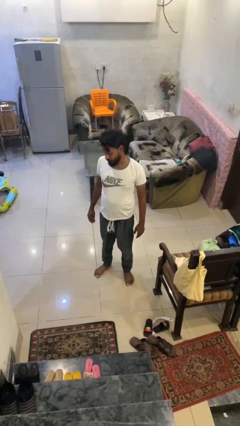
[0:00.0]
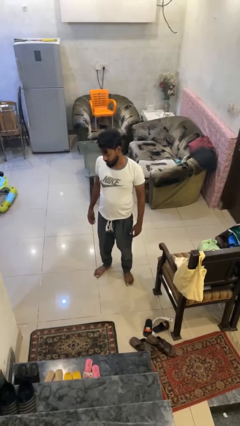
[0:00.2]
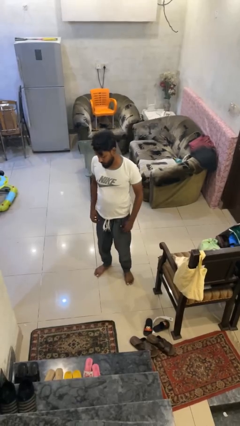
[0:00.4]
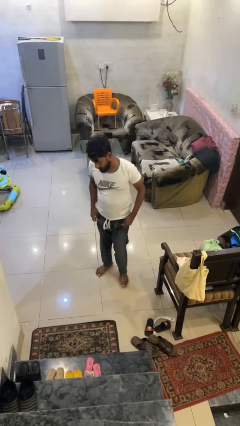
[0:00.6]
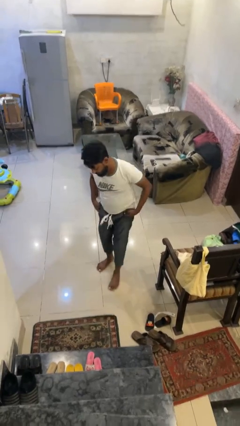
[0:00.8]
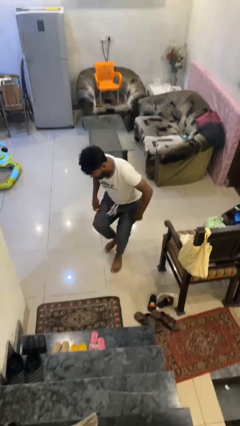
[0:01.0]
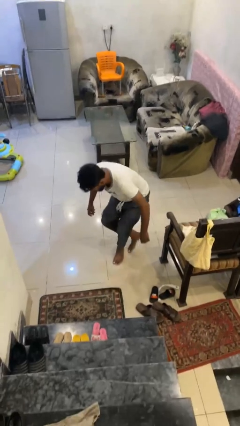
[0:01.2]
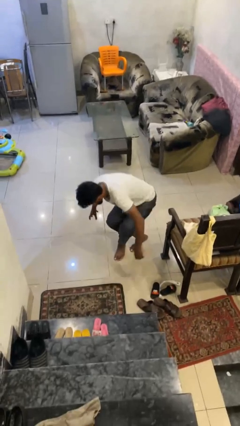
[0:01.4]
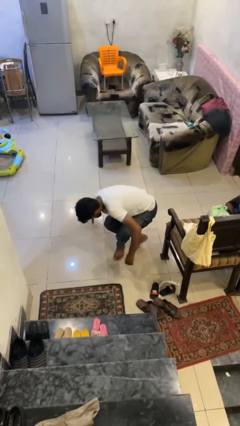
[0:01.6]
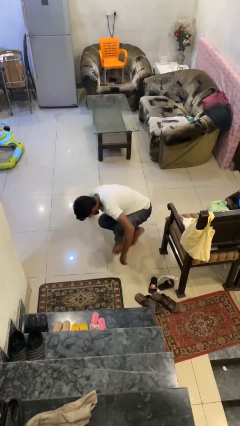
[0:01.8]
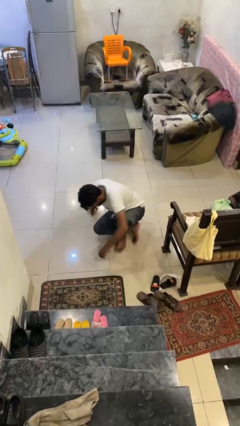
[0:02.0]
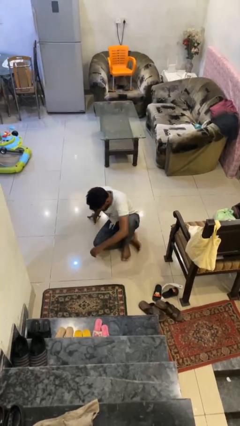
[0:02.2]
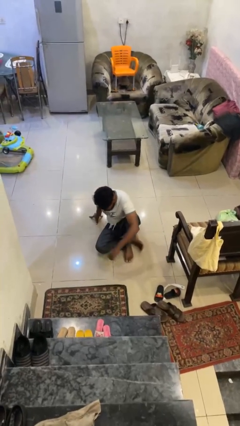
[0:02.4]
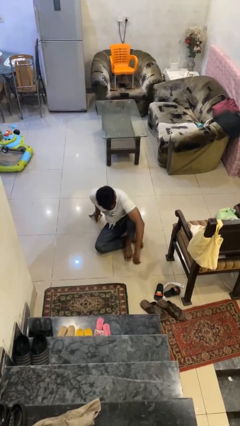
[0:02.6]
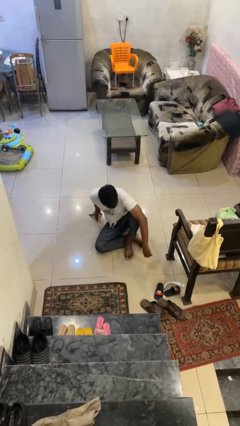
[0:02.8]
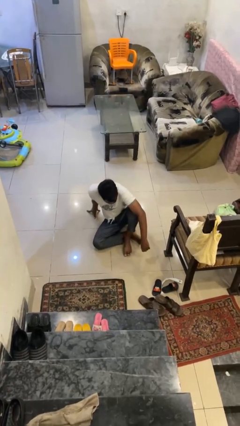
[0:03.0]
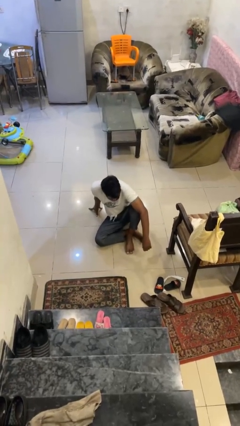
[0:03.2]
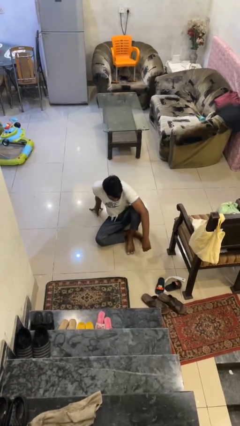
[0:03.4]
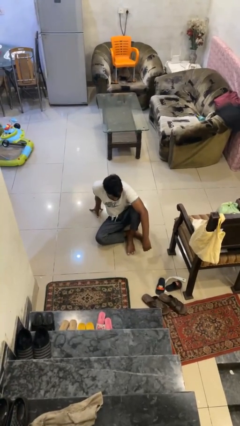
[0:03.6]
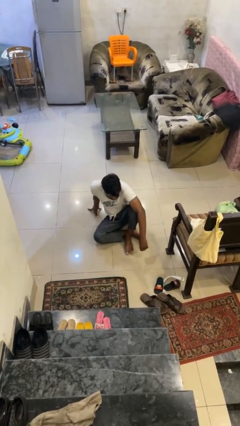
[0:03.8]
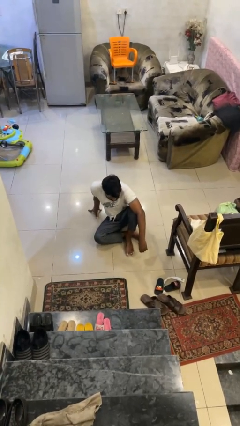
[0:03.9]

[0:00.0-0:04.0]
person sits crisscross

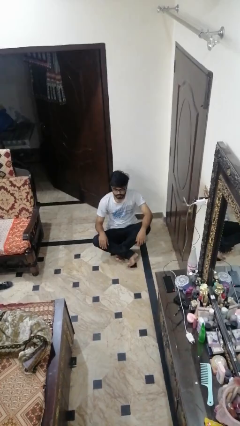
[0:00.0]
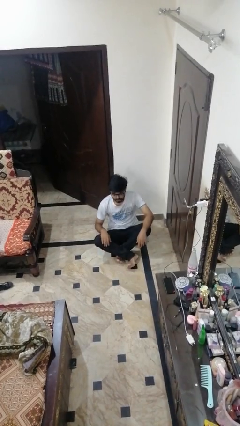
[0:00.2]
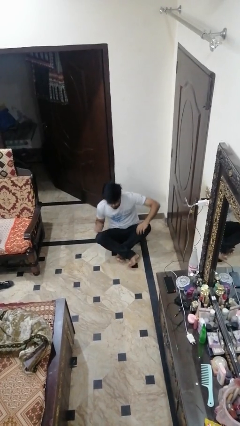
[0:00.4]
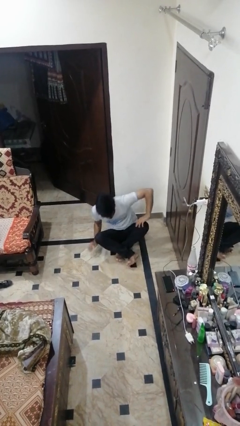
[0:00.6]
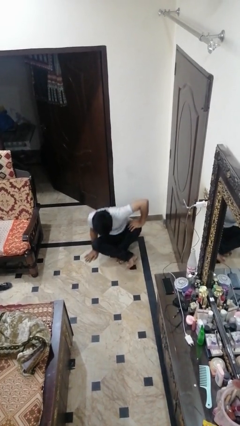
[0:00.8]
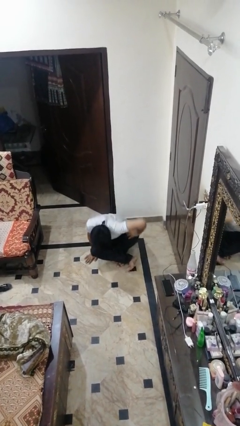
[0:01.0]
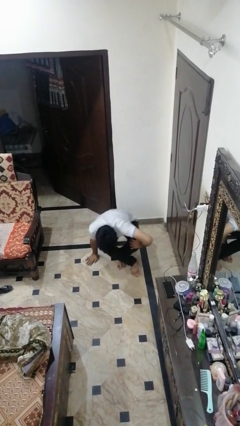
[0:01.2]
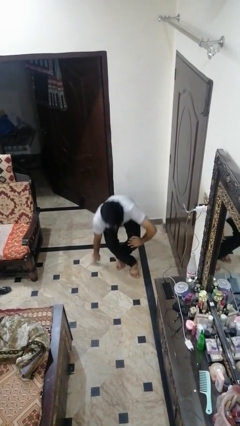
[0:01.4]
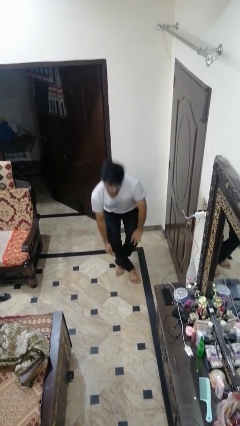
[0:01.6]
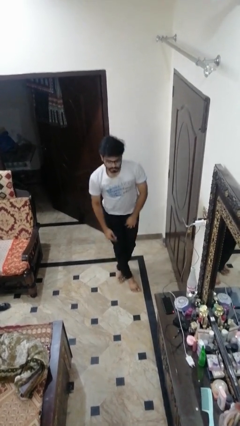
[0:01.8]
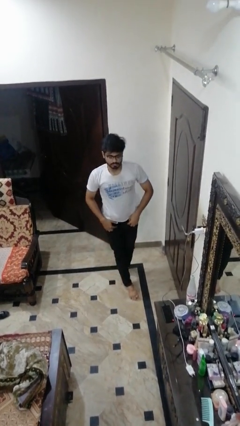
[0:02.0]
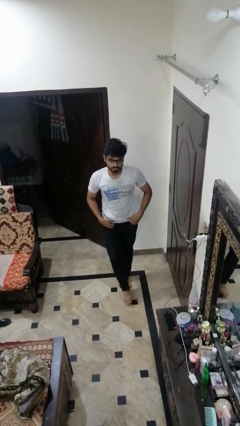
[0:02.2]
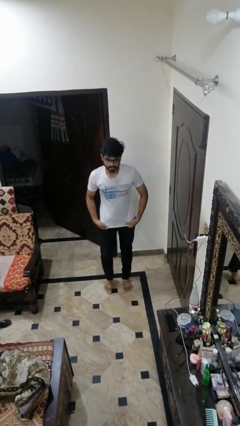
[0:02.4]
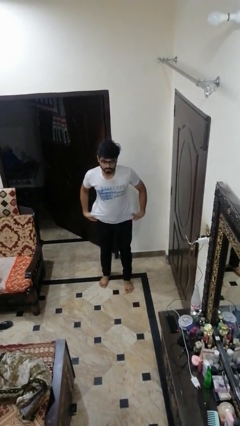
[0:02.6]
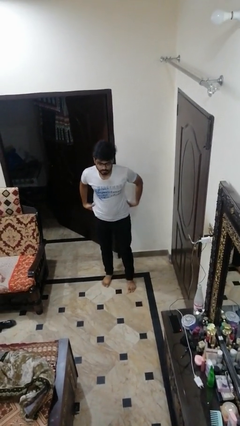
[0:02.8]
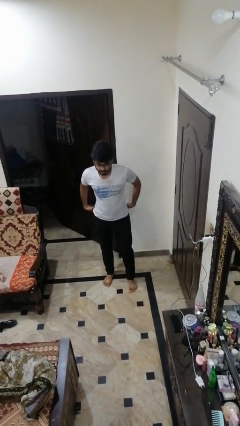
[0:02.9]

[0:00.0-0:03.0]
person stands up from floor

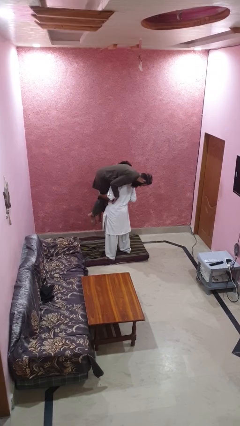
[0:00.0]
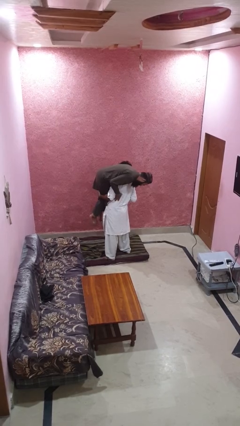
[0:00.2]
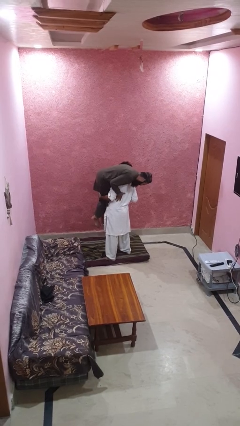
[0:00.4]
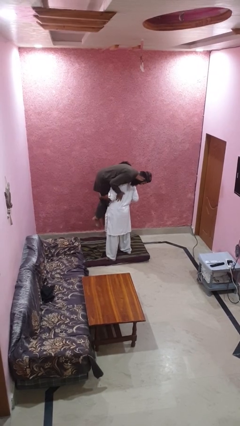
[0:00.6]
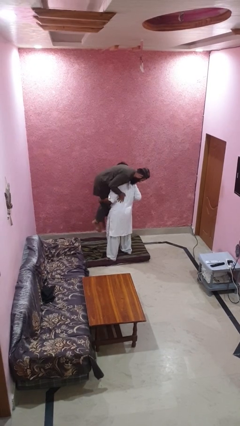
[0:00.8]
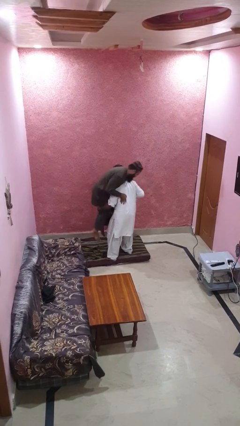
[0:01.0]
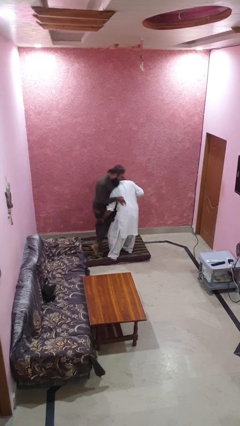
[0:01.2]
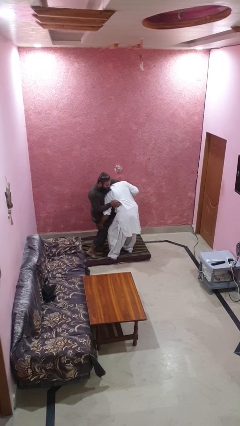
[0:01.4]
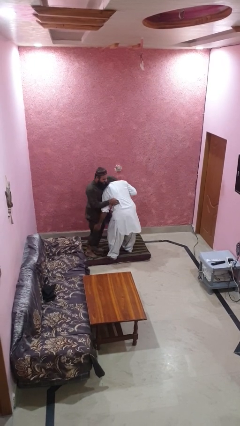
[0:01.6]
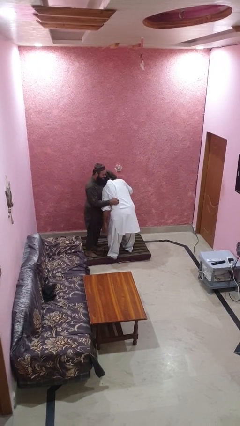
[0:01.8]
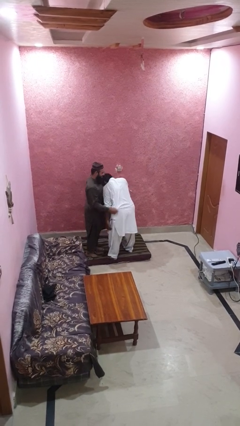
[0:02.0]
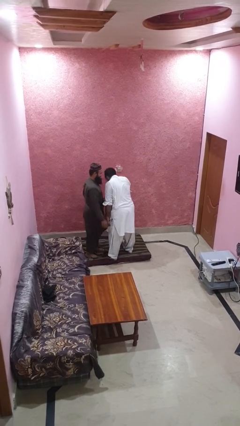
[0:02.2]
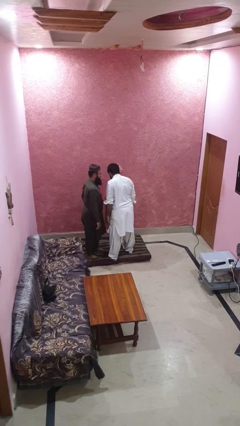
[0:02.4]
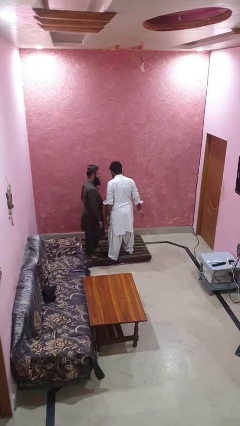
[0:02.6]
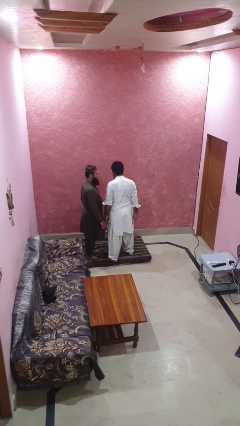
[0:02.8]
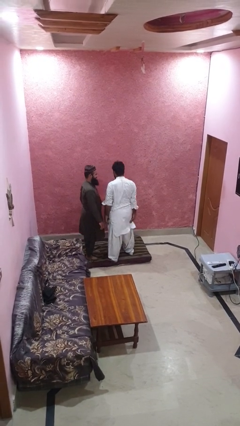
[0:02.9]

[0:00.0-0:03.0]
person puts down person

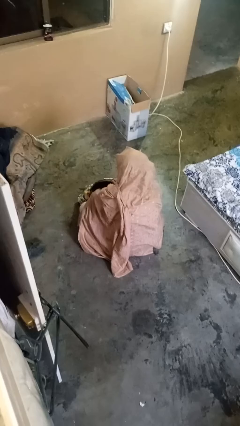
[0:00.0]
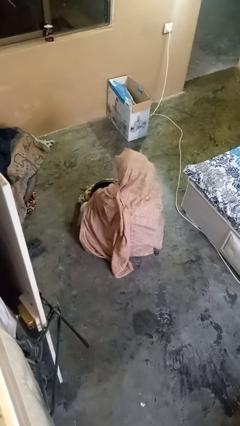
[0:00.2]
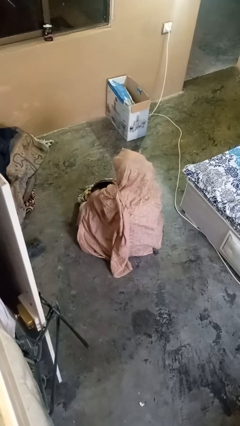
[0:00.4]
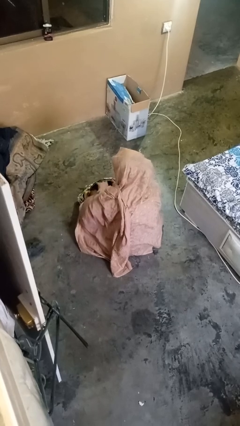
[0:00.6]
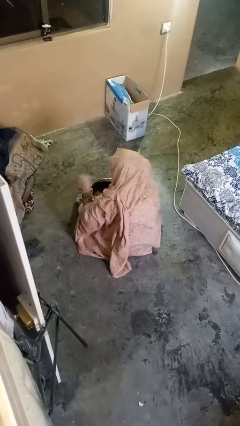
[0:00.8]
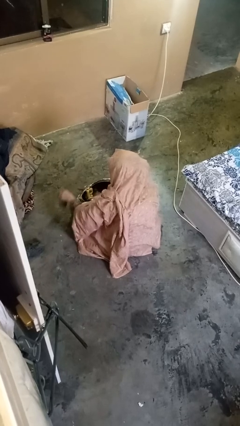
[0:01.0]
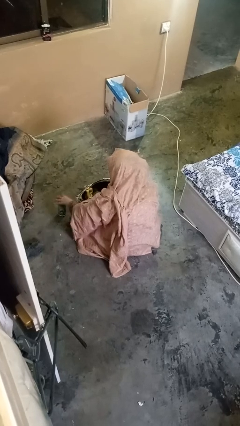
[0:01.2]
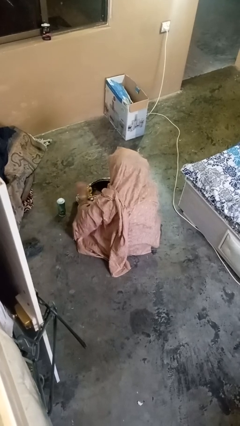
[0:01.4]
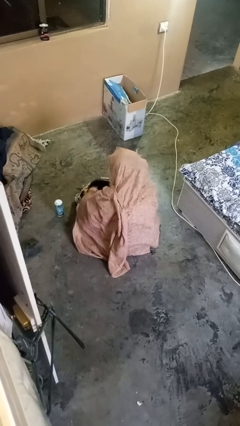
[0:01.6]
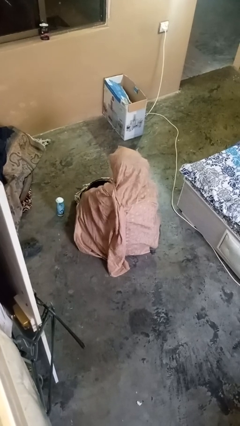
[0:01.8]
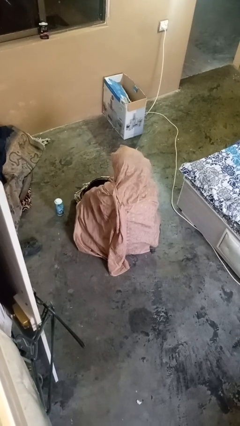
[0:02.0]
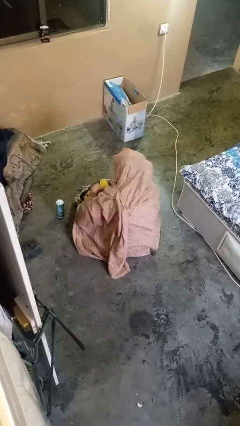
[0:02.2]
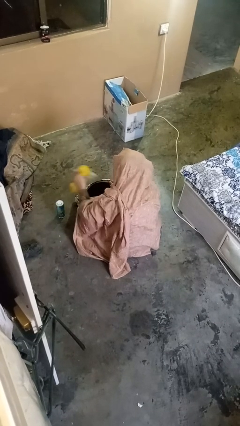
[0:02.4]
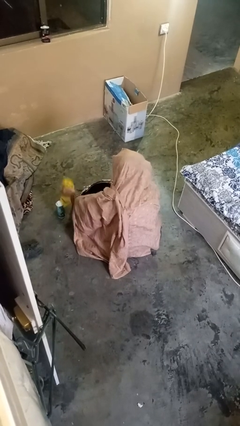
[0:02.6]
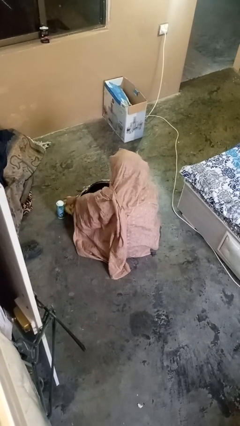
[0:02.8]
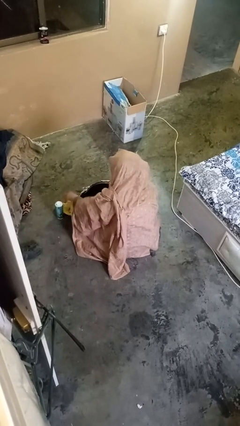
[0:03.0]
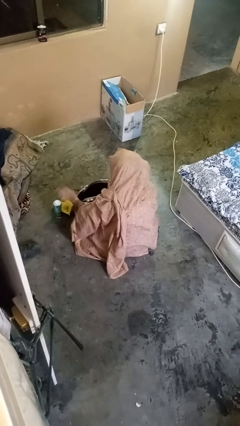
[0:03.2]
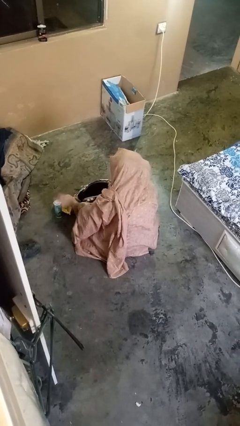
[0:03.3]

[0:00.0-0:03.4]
person takes object from purse

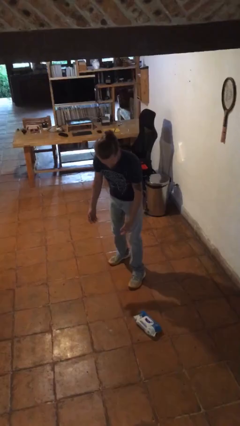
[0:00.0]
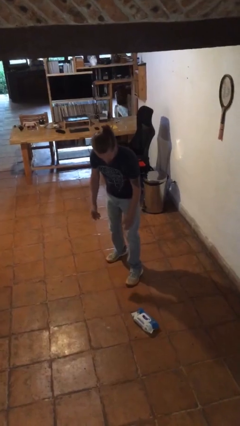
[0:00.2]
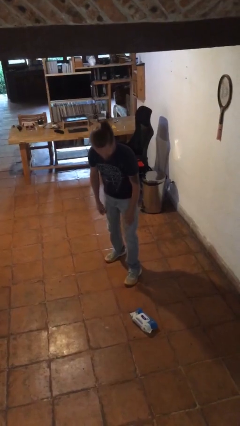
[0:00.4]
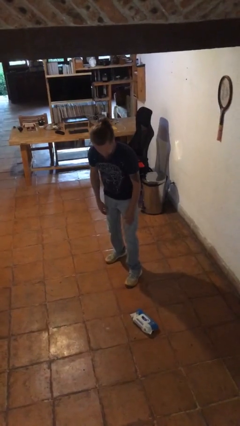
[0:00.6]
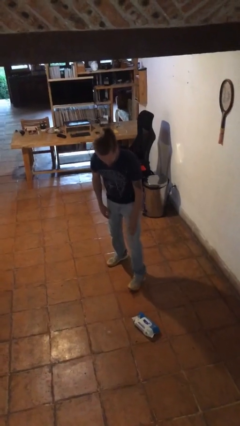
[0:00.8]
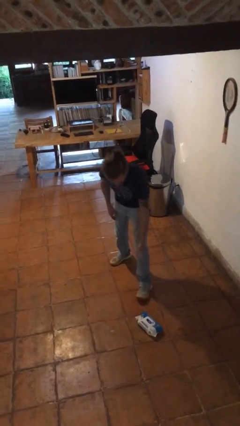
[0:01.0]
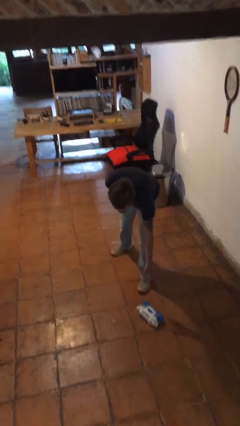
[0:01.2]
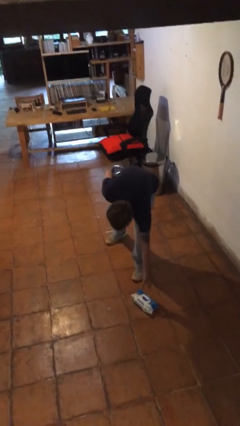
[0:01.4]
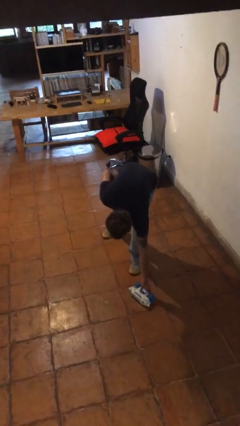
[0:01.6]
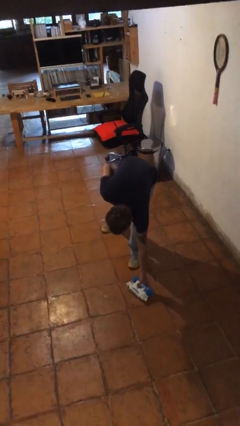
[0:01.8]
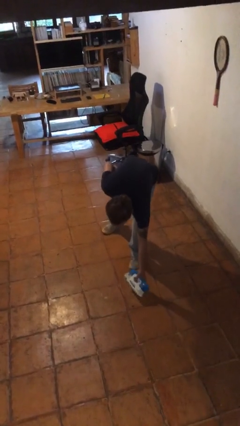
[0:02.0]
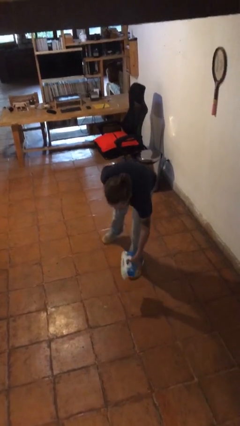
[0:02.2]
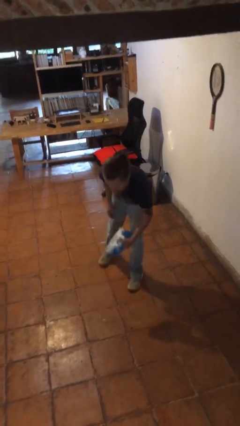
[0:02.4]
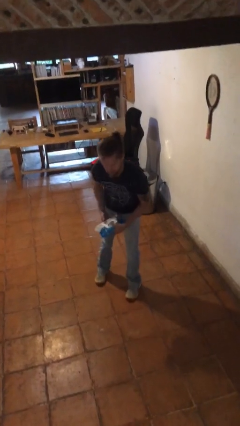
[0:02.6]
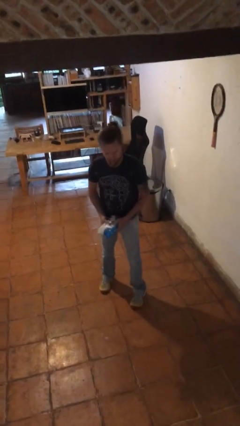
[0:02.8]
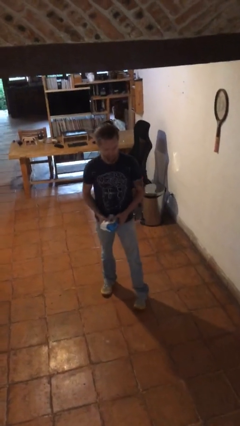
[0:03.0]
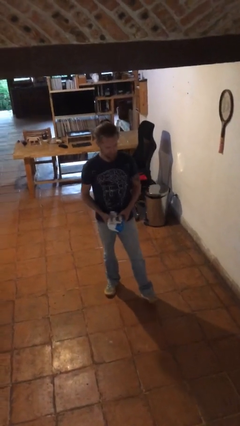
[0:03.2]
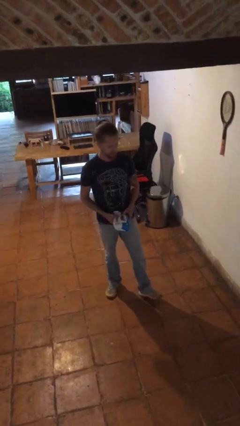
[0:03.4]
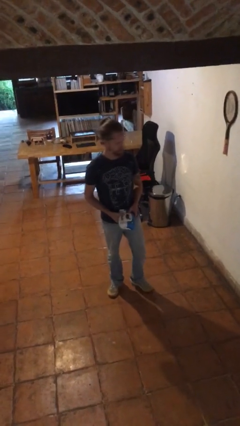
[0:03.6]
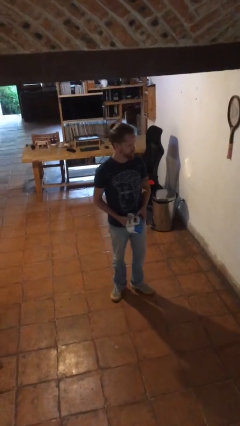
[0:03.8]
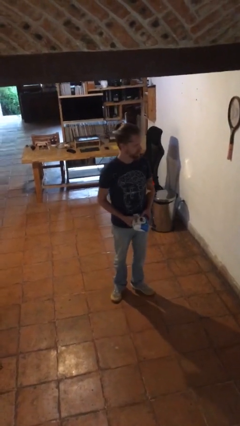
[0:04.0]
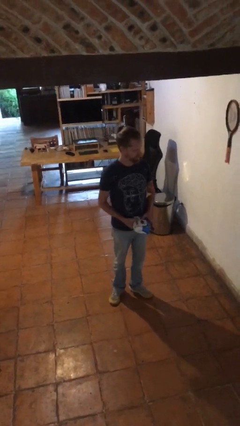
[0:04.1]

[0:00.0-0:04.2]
person picks up object from floor
